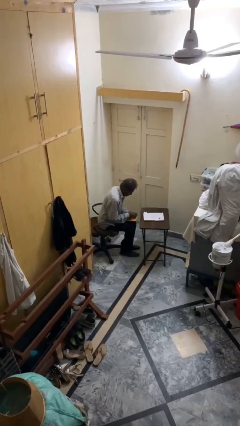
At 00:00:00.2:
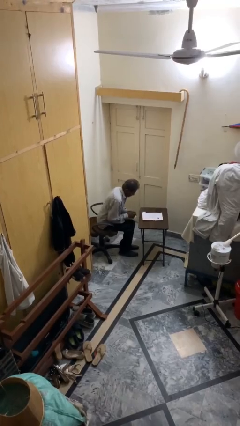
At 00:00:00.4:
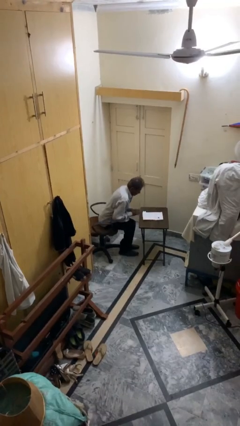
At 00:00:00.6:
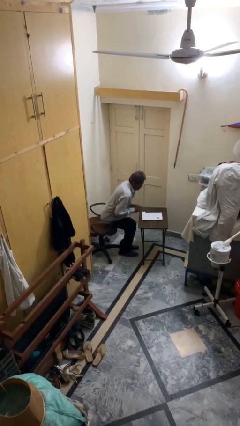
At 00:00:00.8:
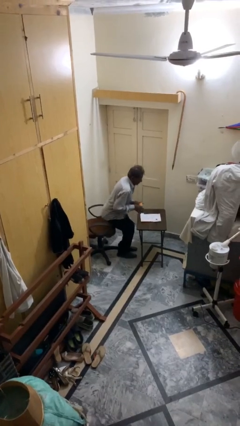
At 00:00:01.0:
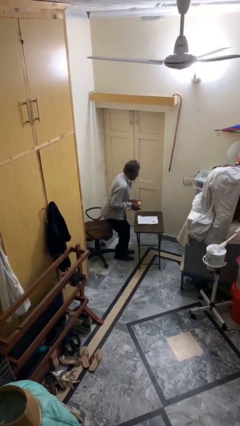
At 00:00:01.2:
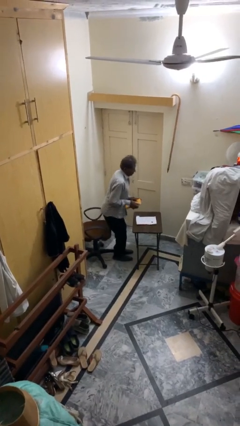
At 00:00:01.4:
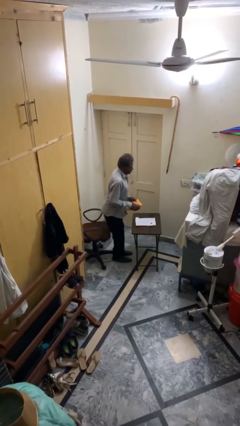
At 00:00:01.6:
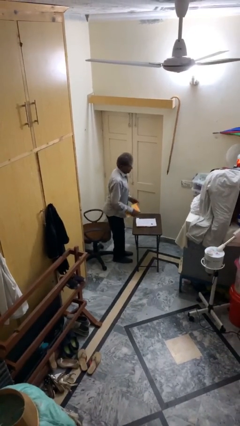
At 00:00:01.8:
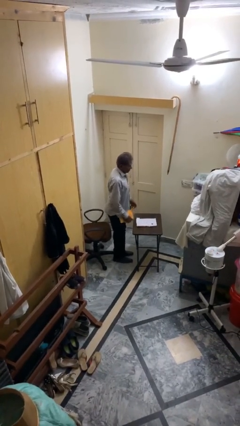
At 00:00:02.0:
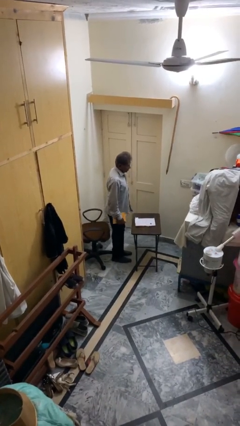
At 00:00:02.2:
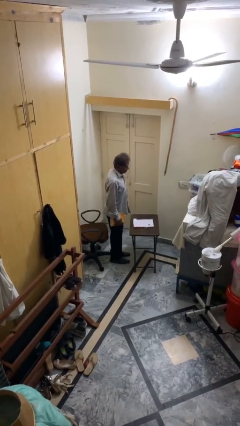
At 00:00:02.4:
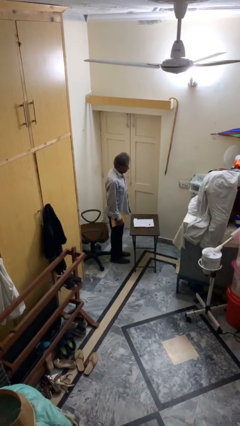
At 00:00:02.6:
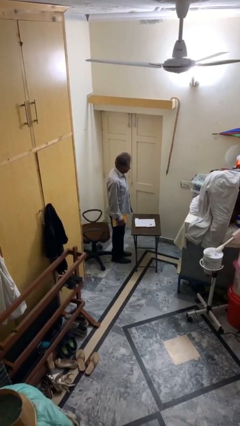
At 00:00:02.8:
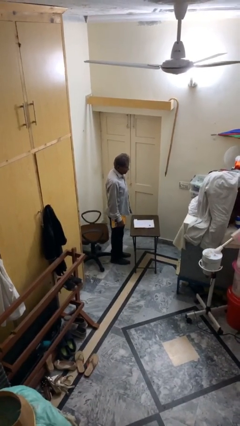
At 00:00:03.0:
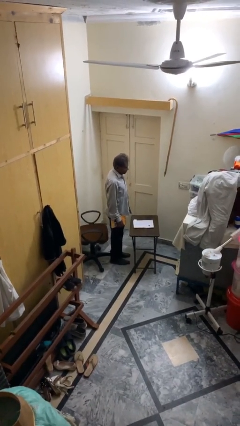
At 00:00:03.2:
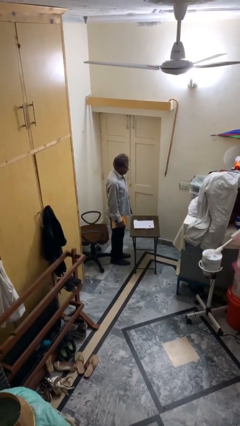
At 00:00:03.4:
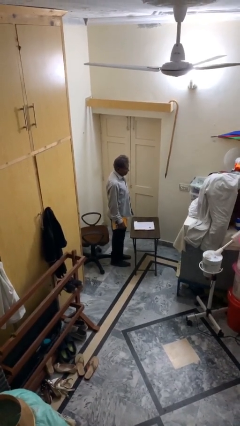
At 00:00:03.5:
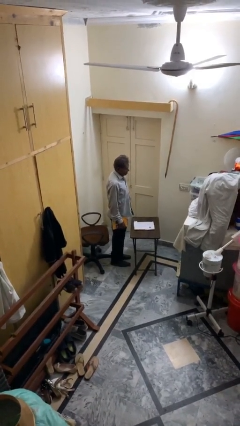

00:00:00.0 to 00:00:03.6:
person stands up

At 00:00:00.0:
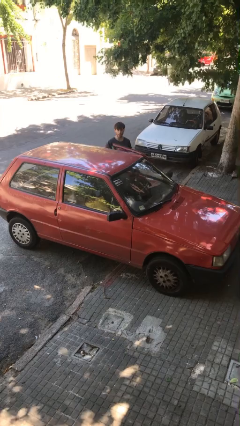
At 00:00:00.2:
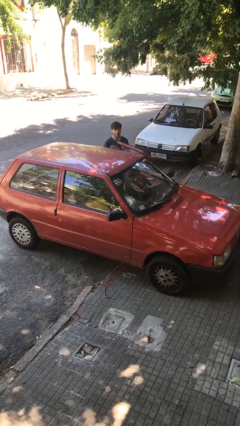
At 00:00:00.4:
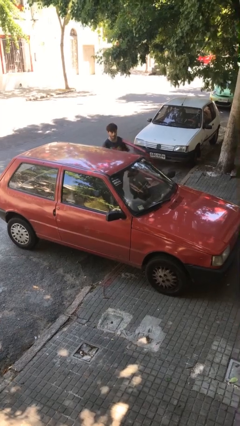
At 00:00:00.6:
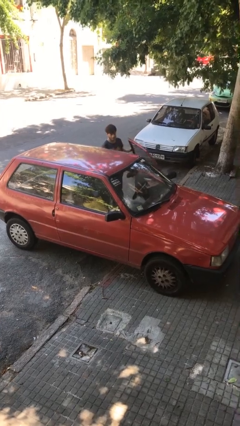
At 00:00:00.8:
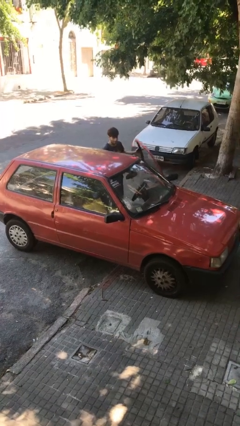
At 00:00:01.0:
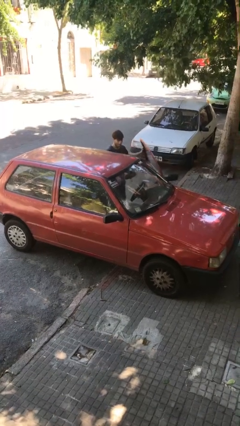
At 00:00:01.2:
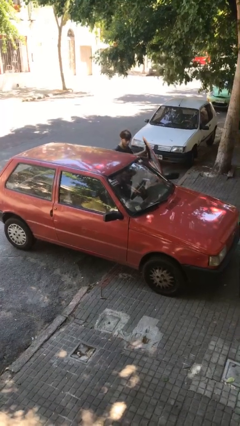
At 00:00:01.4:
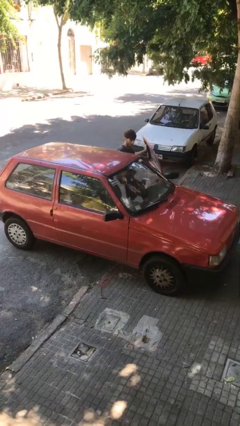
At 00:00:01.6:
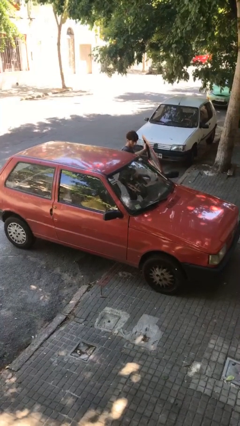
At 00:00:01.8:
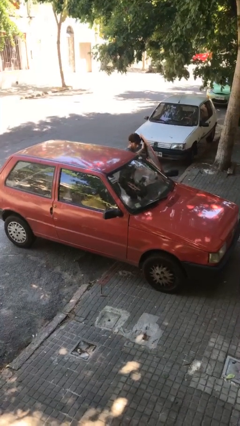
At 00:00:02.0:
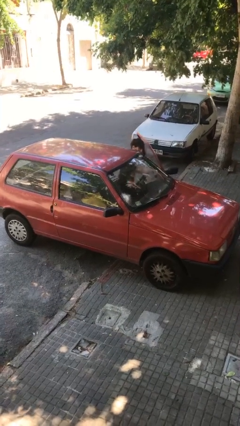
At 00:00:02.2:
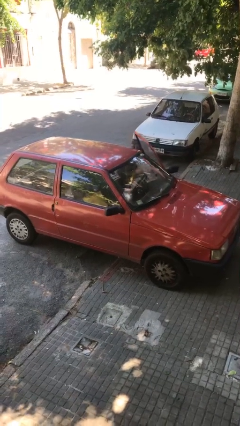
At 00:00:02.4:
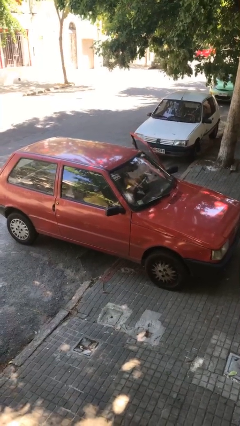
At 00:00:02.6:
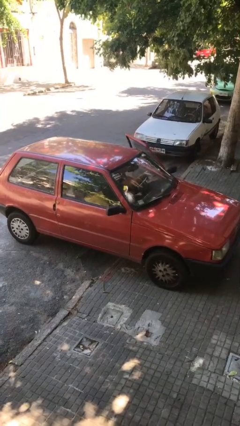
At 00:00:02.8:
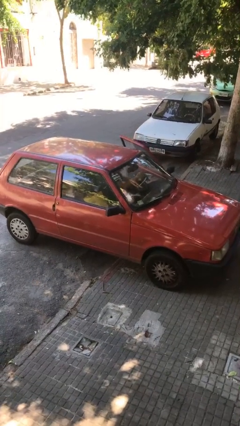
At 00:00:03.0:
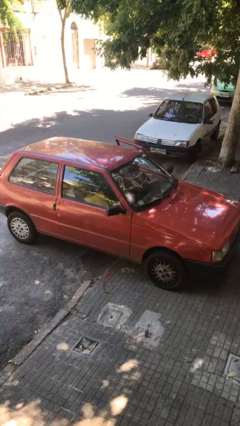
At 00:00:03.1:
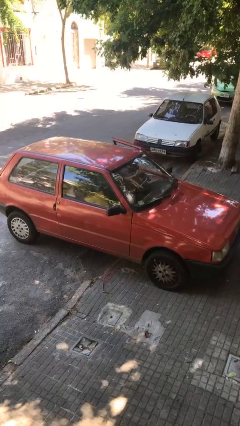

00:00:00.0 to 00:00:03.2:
car picks up person

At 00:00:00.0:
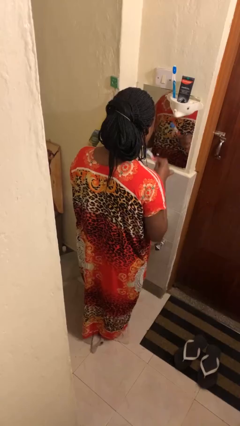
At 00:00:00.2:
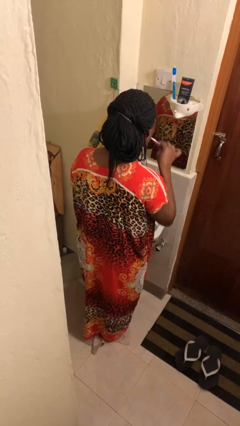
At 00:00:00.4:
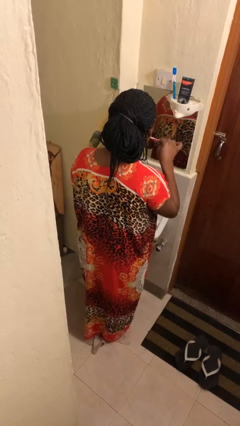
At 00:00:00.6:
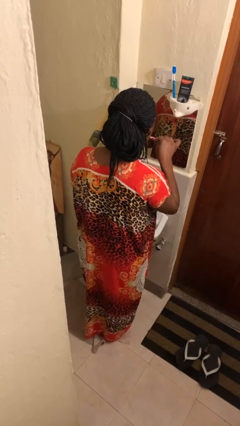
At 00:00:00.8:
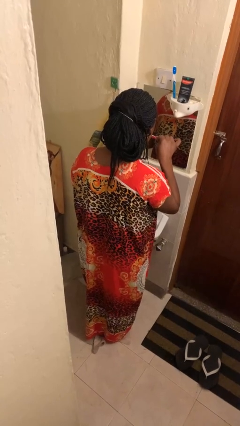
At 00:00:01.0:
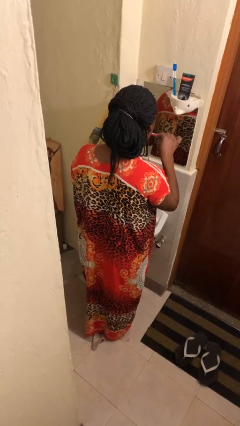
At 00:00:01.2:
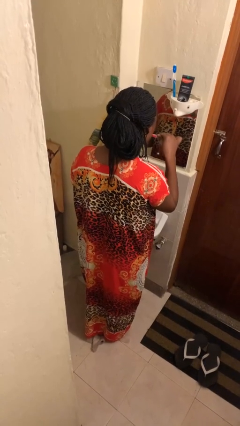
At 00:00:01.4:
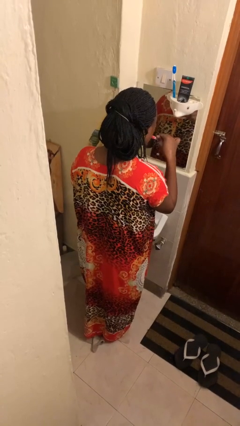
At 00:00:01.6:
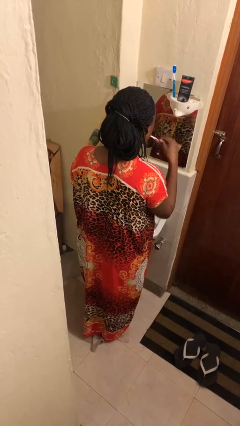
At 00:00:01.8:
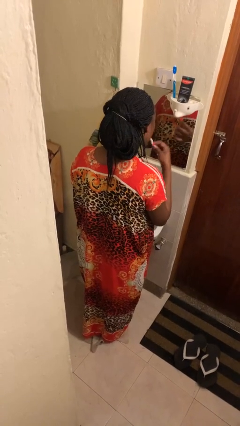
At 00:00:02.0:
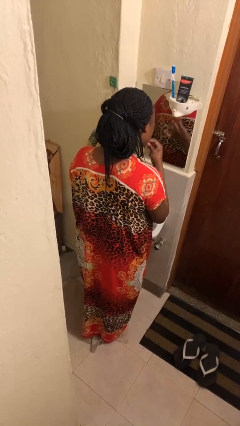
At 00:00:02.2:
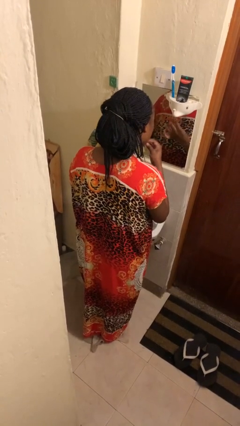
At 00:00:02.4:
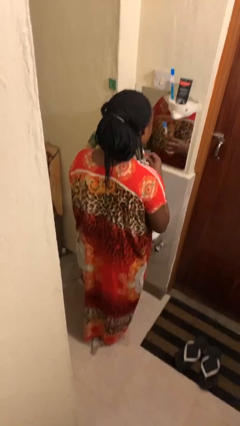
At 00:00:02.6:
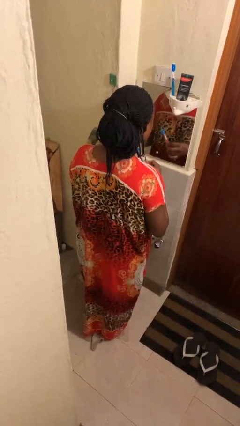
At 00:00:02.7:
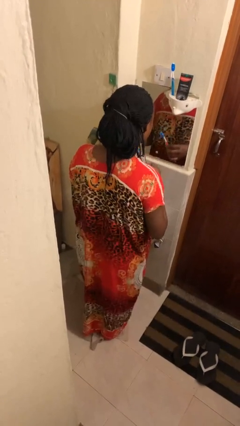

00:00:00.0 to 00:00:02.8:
person brushes teeth

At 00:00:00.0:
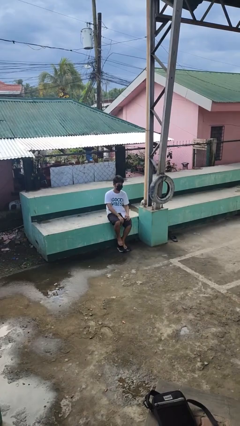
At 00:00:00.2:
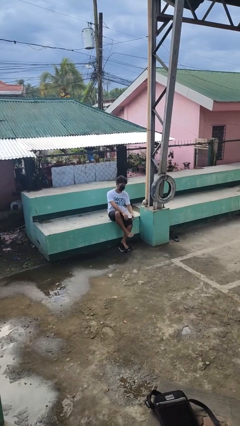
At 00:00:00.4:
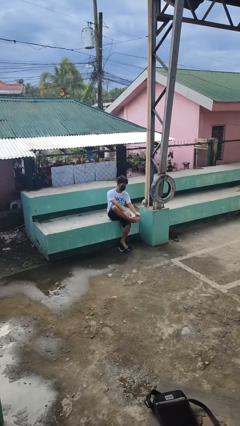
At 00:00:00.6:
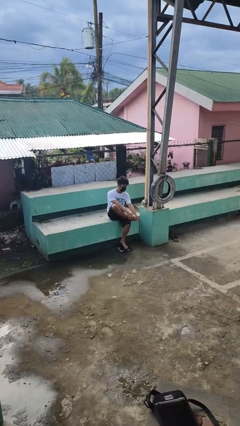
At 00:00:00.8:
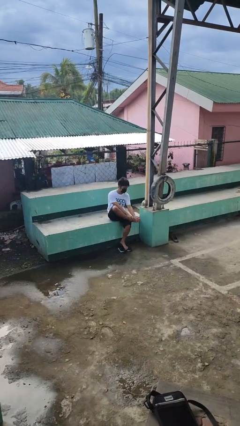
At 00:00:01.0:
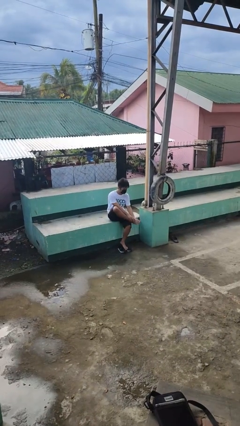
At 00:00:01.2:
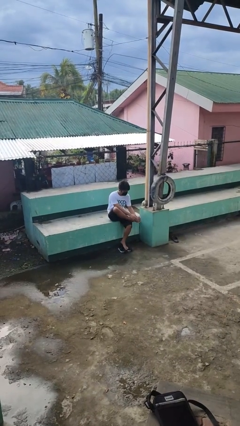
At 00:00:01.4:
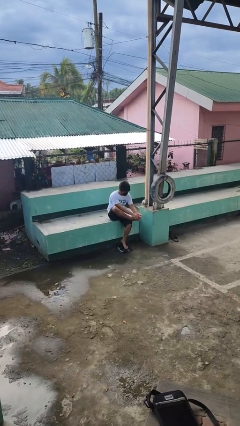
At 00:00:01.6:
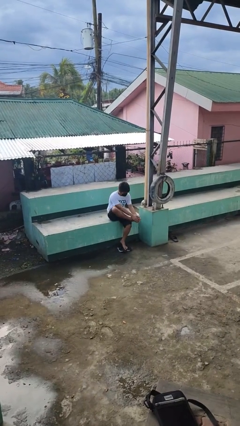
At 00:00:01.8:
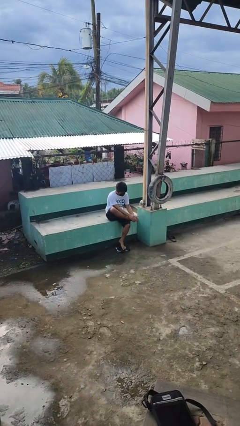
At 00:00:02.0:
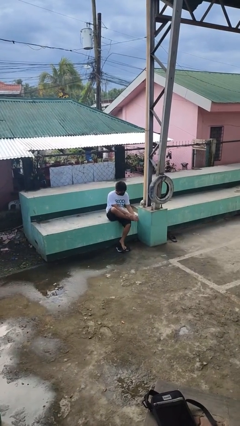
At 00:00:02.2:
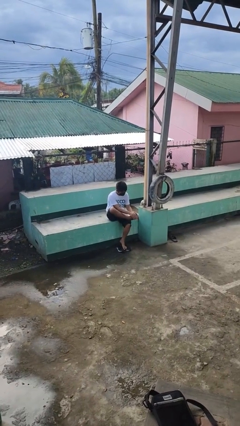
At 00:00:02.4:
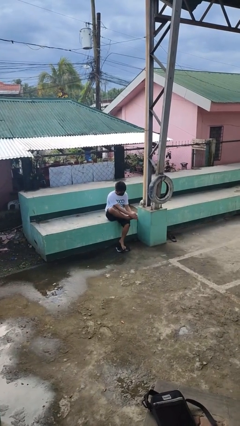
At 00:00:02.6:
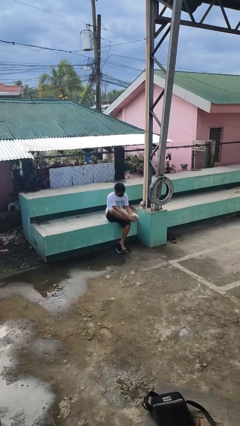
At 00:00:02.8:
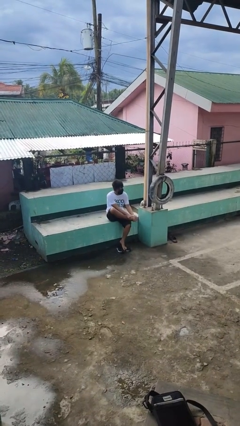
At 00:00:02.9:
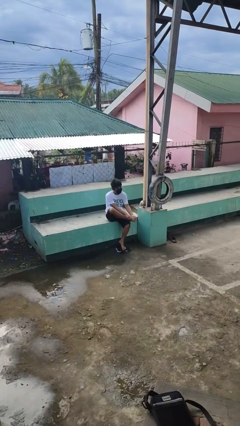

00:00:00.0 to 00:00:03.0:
person rubs foot

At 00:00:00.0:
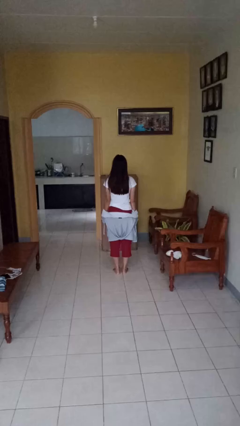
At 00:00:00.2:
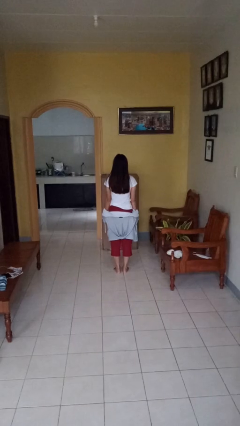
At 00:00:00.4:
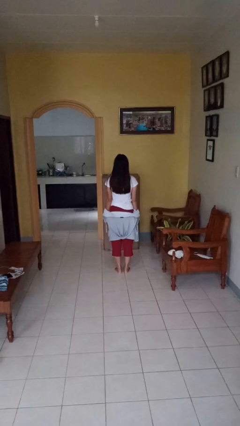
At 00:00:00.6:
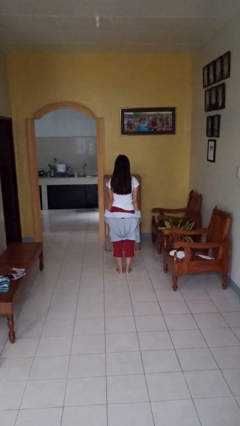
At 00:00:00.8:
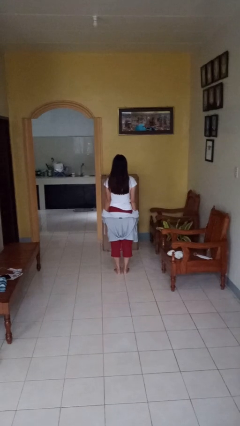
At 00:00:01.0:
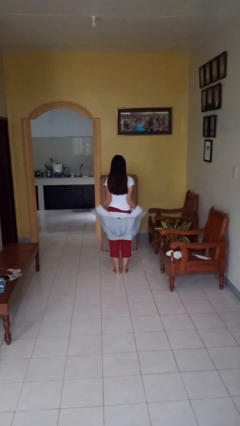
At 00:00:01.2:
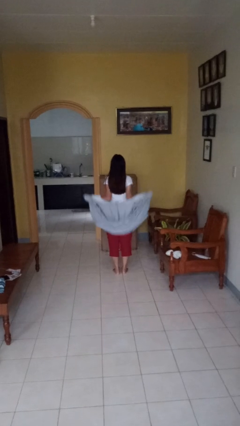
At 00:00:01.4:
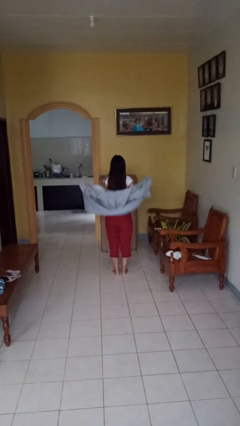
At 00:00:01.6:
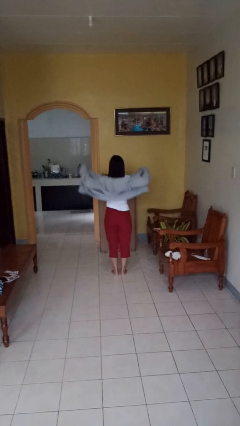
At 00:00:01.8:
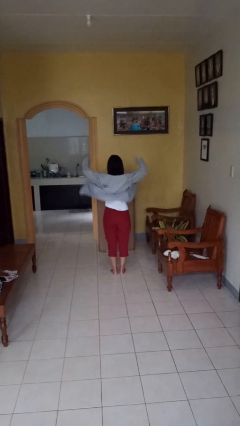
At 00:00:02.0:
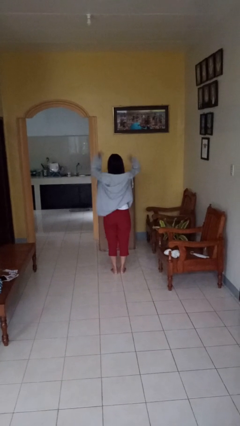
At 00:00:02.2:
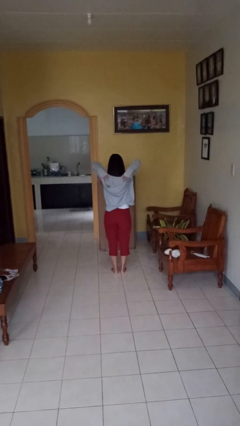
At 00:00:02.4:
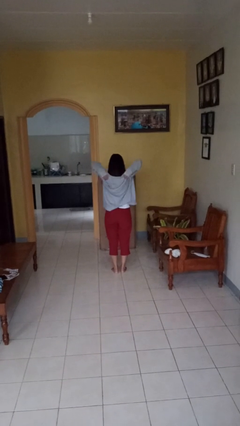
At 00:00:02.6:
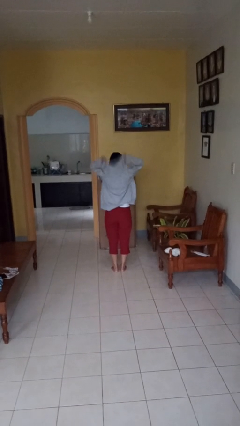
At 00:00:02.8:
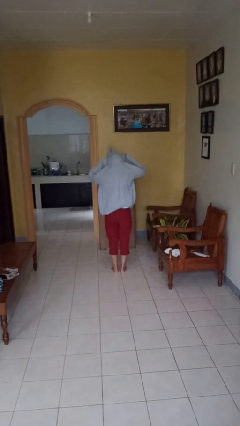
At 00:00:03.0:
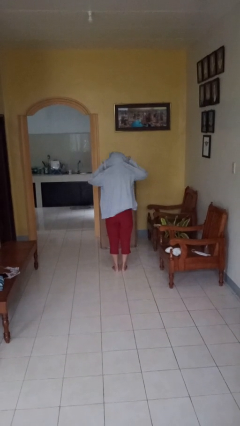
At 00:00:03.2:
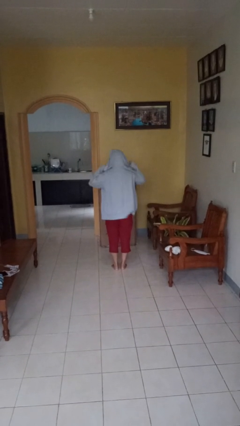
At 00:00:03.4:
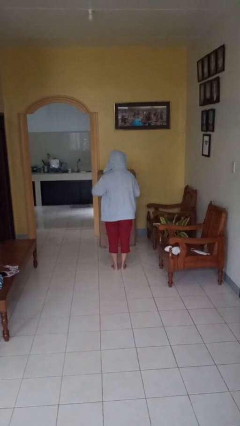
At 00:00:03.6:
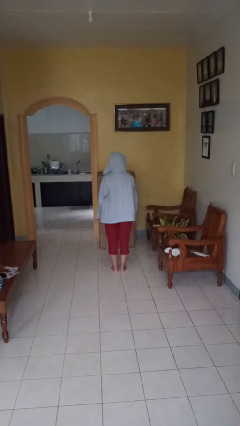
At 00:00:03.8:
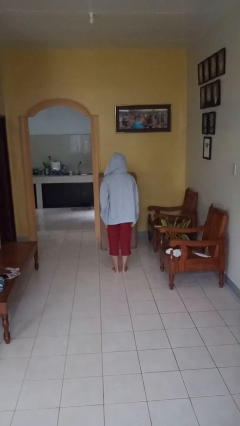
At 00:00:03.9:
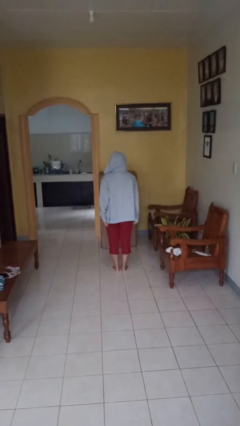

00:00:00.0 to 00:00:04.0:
person puts on hoodie

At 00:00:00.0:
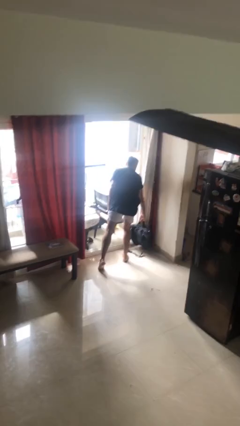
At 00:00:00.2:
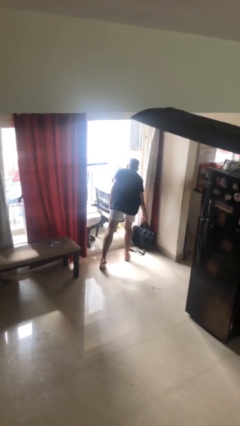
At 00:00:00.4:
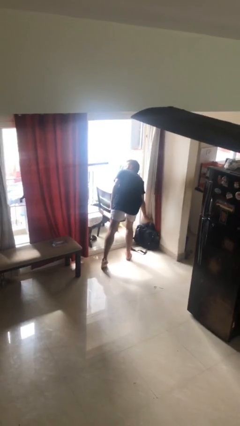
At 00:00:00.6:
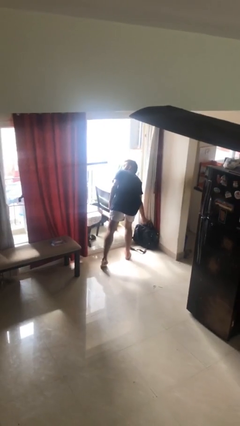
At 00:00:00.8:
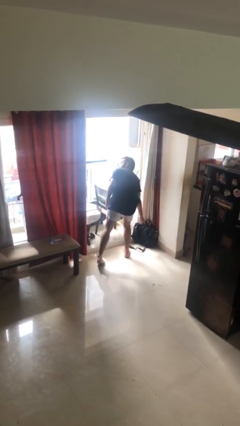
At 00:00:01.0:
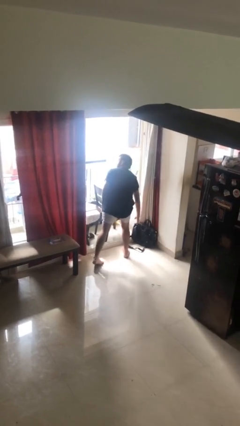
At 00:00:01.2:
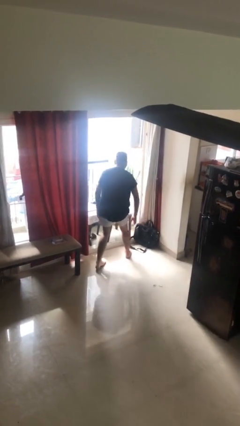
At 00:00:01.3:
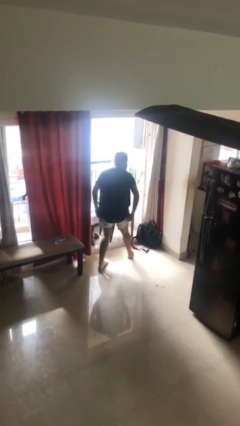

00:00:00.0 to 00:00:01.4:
person puts down object on floor
